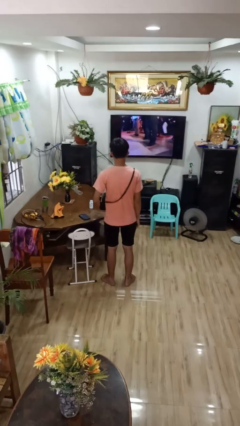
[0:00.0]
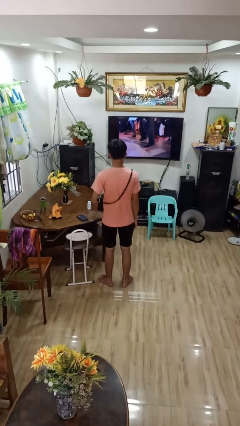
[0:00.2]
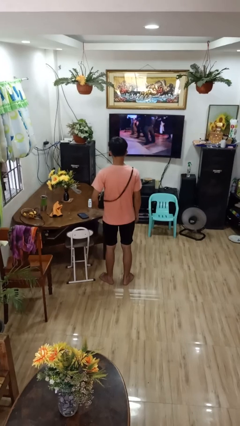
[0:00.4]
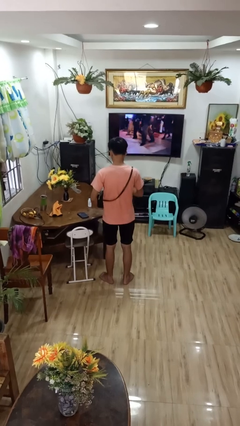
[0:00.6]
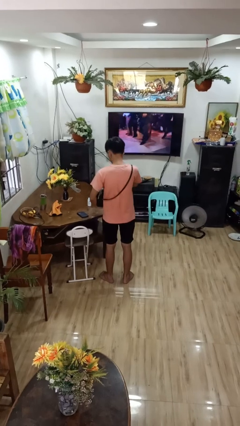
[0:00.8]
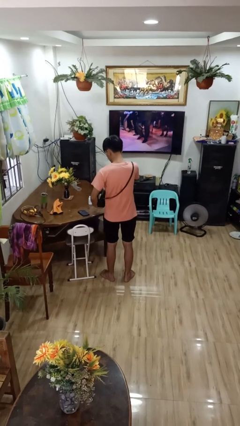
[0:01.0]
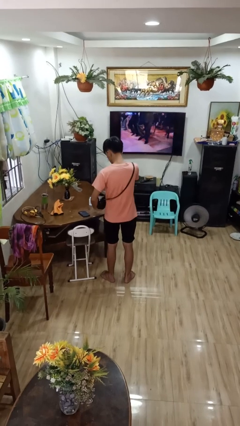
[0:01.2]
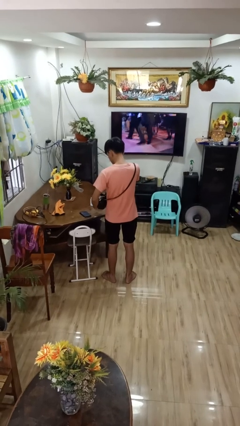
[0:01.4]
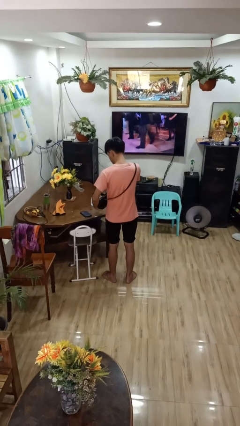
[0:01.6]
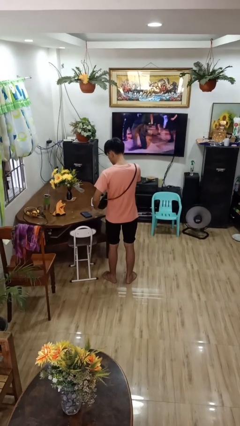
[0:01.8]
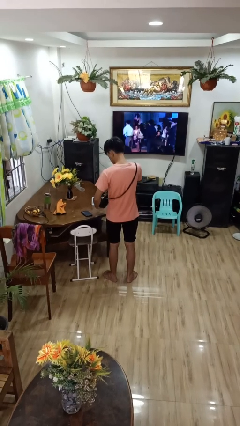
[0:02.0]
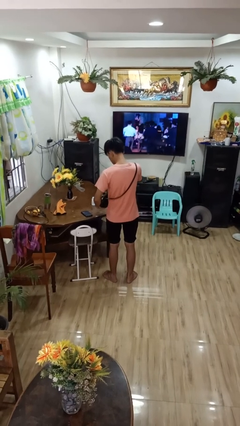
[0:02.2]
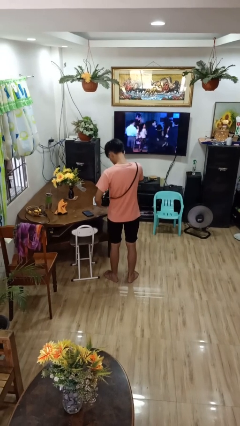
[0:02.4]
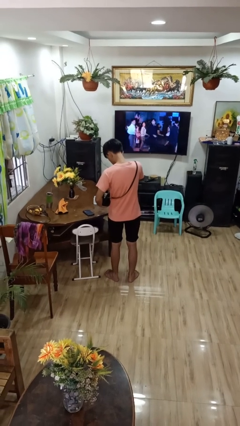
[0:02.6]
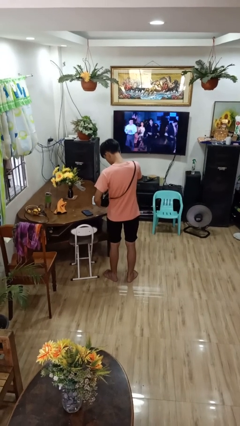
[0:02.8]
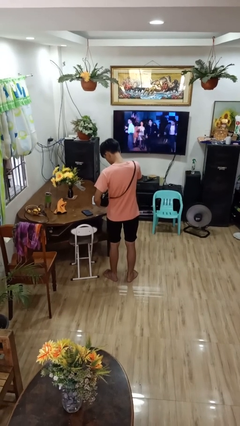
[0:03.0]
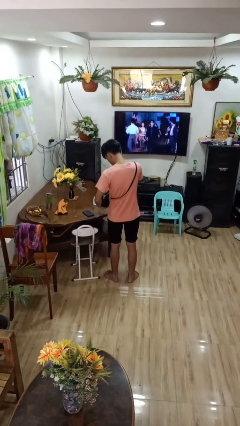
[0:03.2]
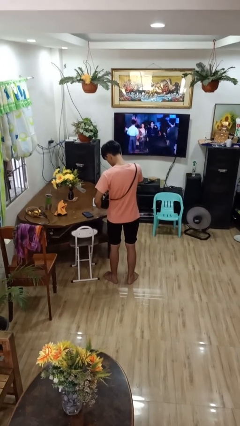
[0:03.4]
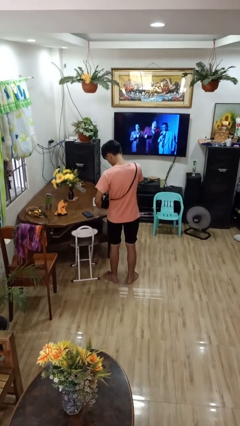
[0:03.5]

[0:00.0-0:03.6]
person searches in purse

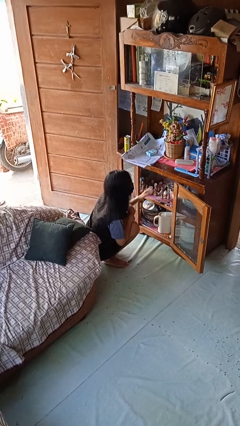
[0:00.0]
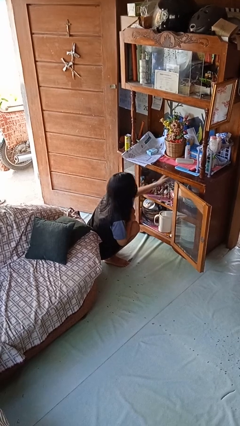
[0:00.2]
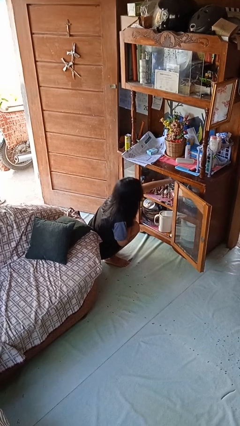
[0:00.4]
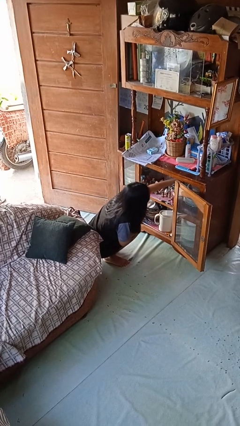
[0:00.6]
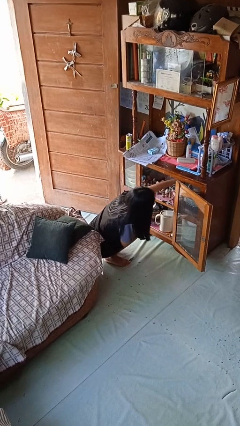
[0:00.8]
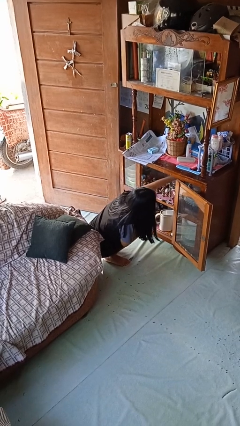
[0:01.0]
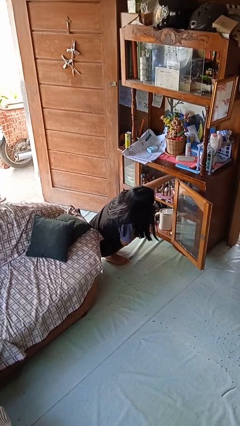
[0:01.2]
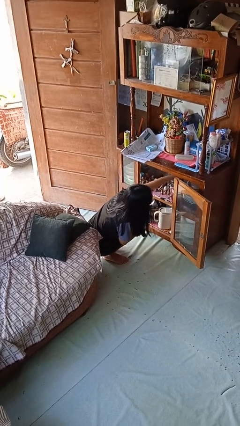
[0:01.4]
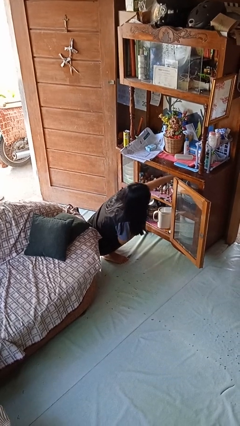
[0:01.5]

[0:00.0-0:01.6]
person searches in cabinet

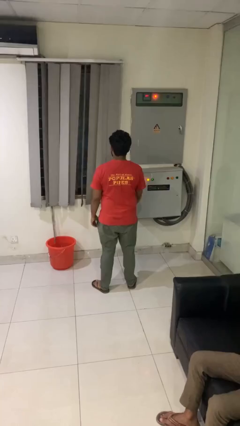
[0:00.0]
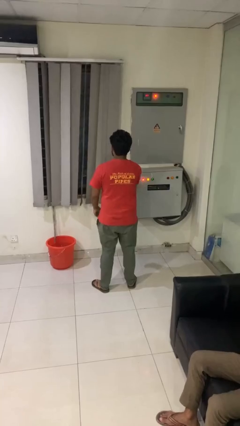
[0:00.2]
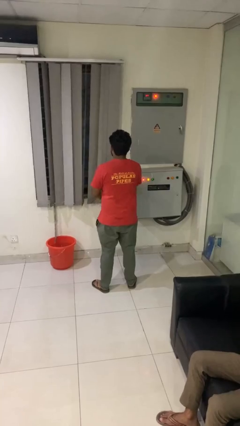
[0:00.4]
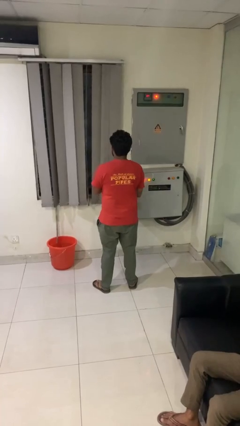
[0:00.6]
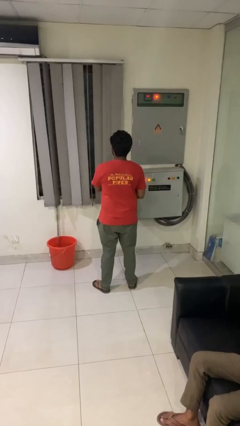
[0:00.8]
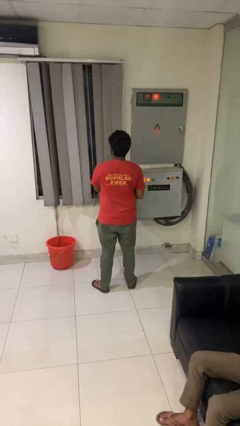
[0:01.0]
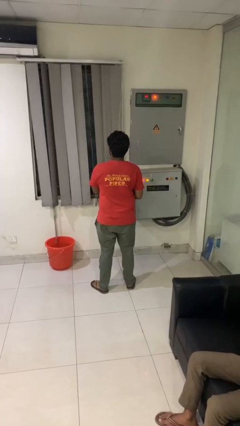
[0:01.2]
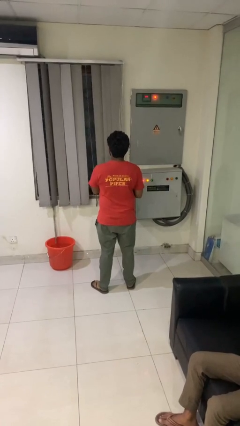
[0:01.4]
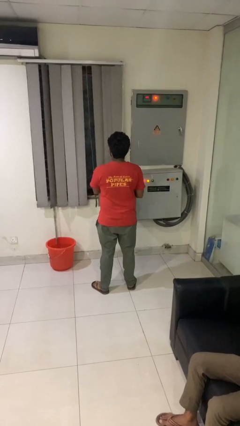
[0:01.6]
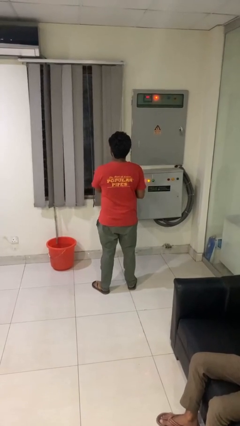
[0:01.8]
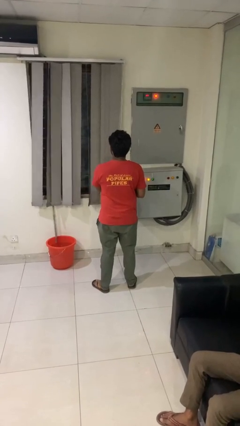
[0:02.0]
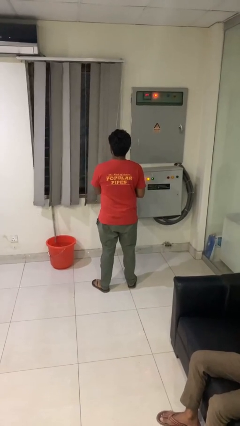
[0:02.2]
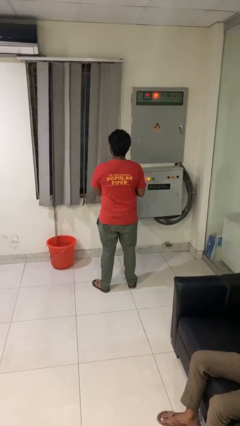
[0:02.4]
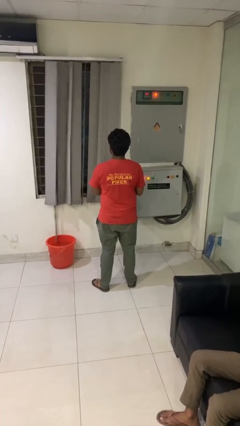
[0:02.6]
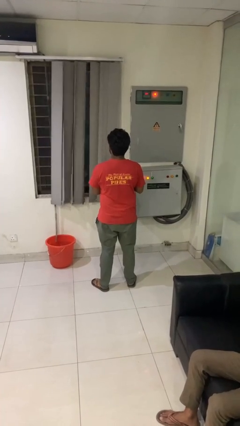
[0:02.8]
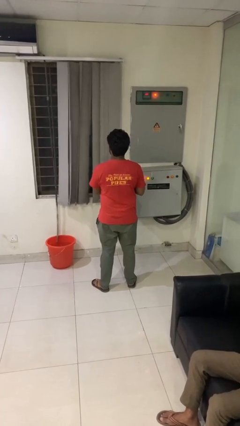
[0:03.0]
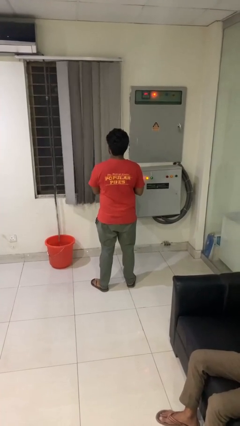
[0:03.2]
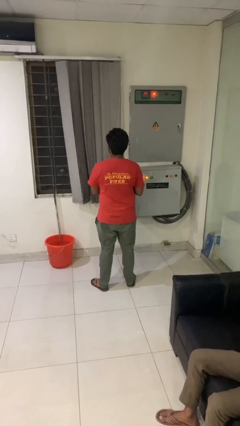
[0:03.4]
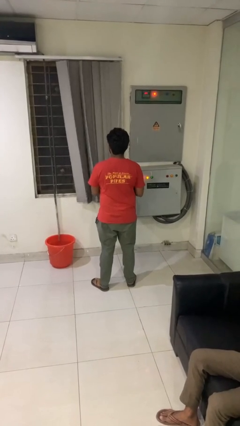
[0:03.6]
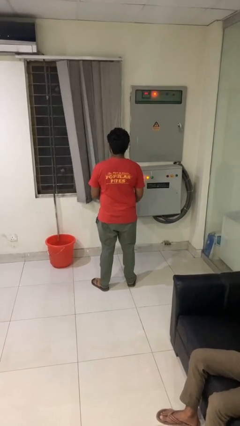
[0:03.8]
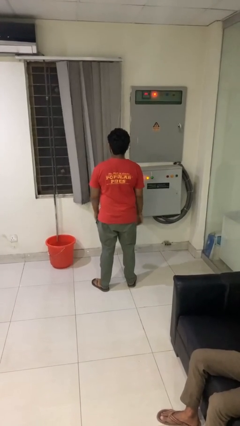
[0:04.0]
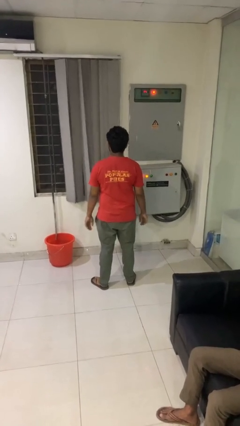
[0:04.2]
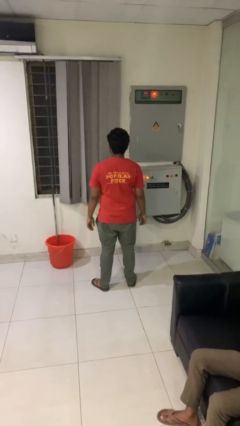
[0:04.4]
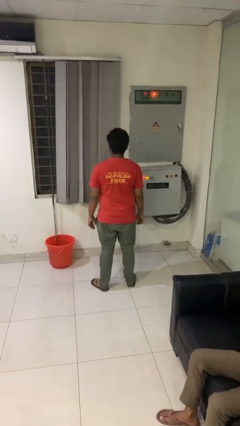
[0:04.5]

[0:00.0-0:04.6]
person opens curtains

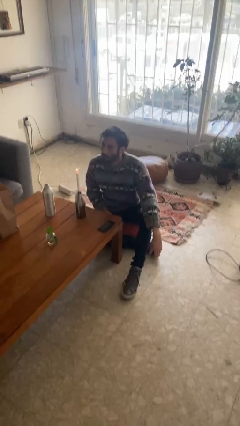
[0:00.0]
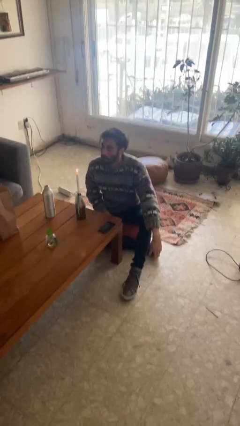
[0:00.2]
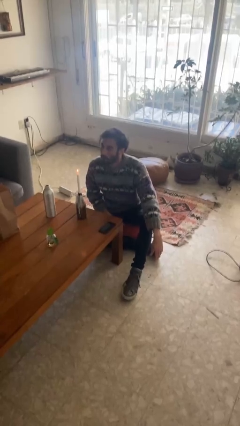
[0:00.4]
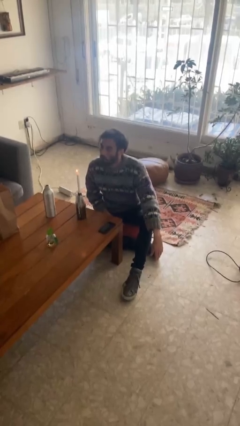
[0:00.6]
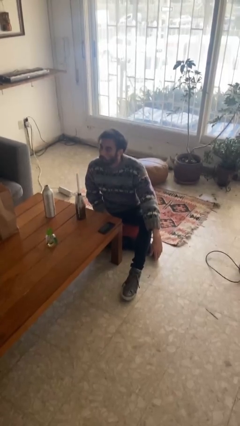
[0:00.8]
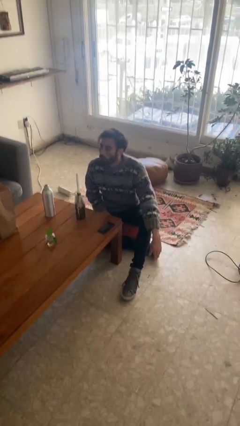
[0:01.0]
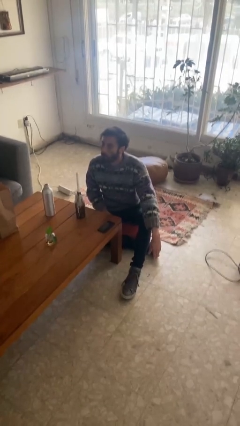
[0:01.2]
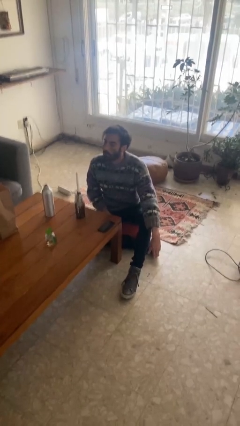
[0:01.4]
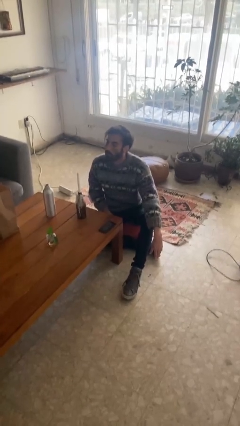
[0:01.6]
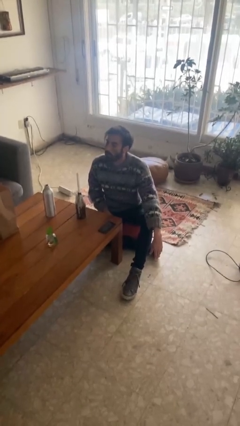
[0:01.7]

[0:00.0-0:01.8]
person extinguishes candle

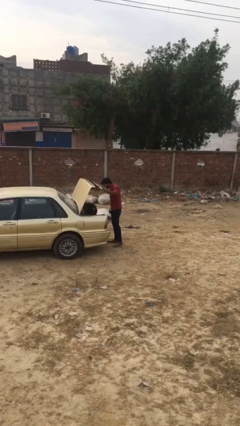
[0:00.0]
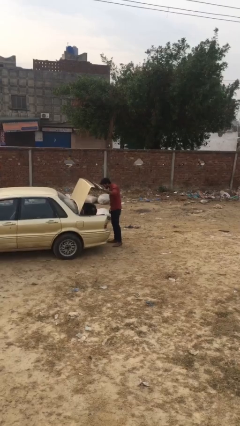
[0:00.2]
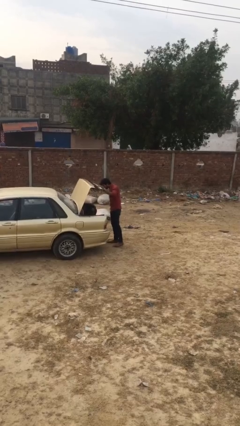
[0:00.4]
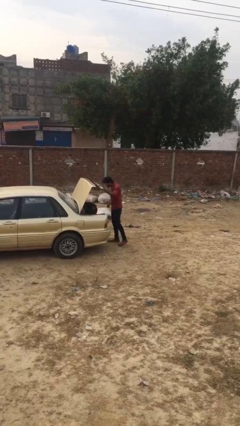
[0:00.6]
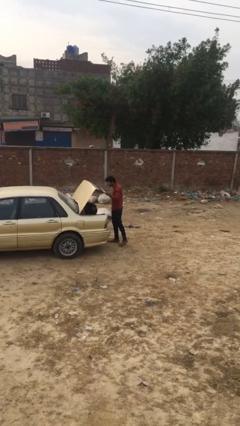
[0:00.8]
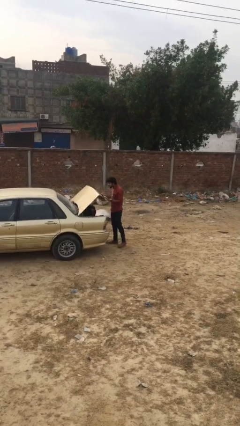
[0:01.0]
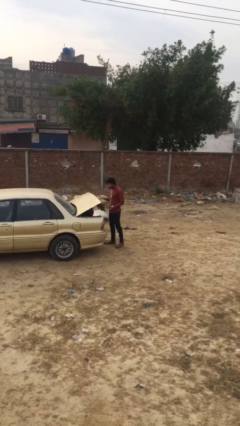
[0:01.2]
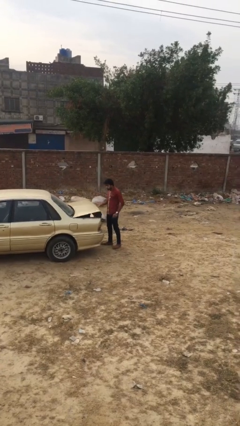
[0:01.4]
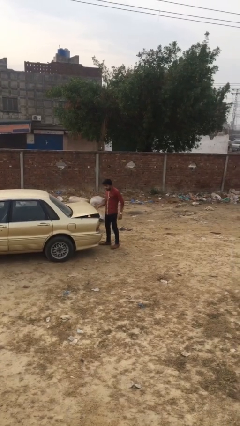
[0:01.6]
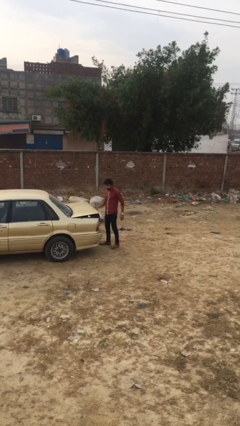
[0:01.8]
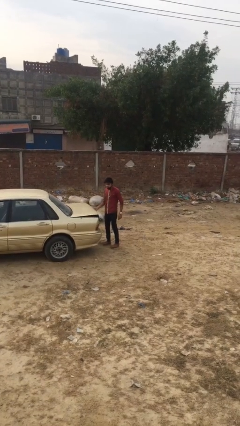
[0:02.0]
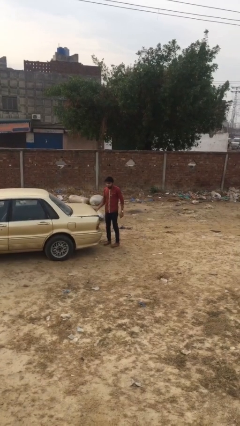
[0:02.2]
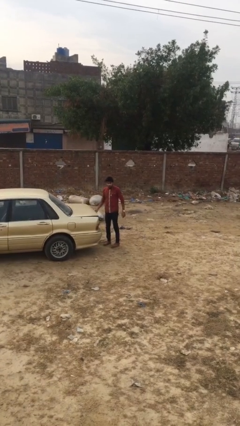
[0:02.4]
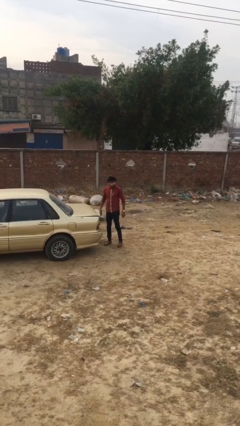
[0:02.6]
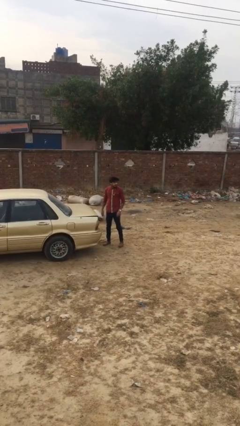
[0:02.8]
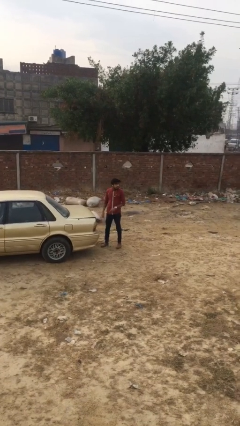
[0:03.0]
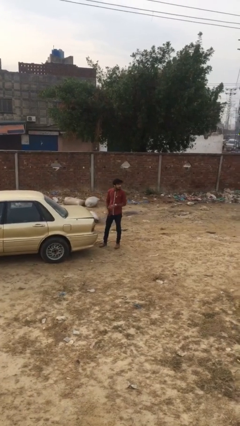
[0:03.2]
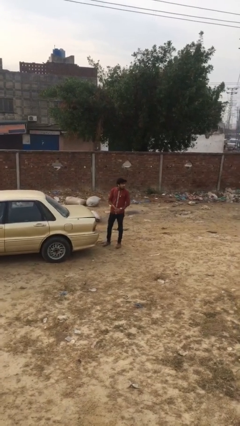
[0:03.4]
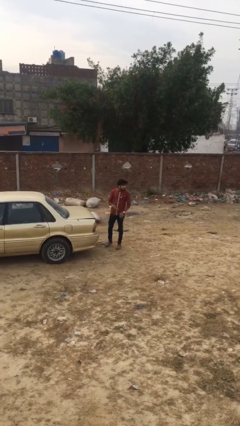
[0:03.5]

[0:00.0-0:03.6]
person closes car trunk

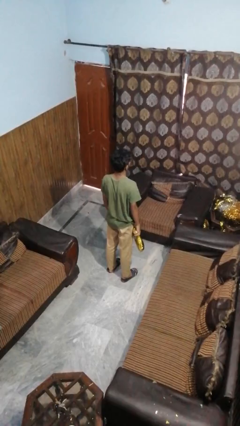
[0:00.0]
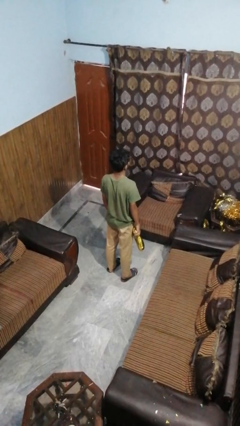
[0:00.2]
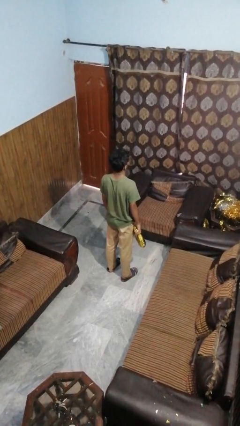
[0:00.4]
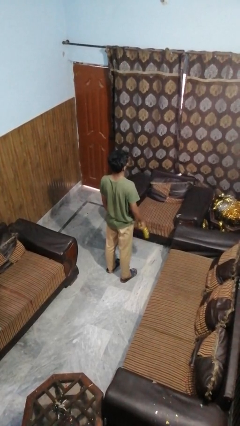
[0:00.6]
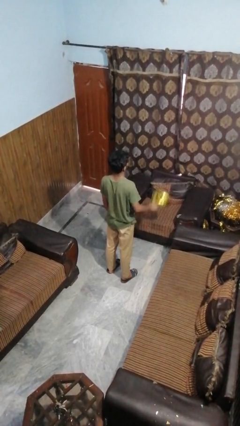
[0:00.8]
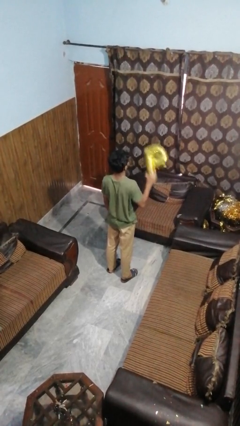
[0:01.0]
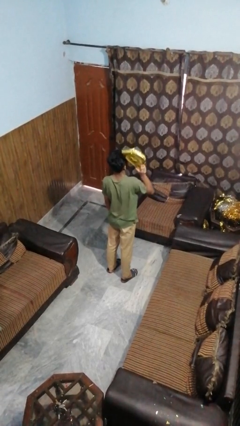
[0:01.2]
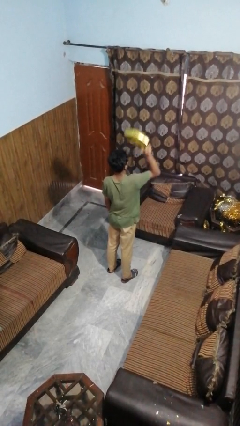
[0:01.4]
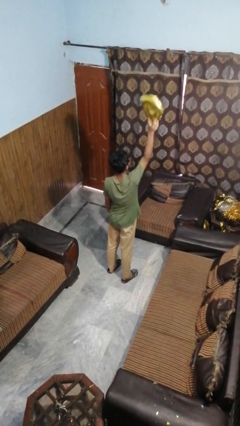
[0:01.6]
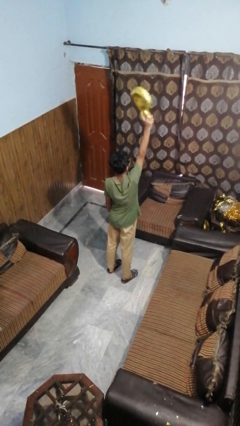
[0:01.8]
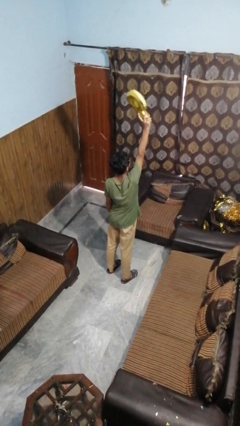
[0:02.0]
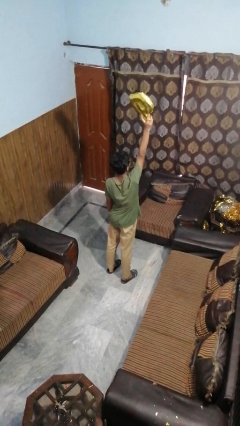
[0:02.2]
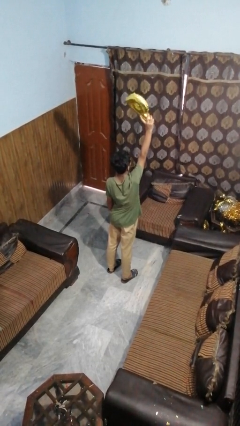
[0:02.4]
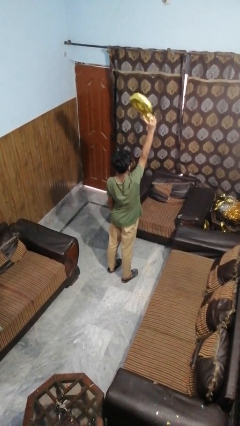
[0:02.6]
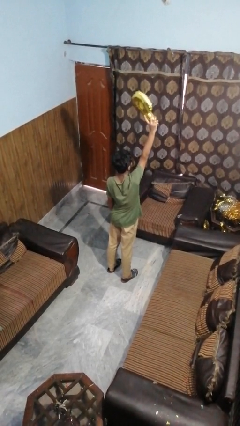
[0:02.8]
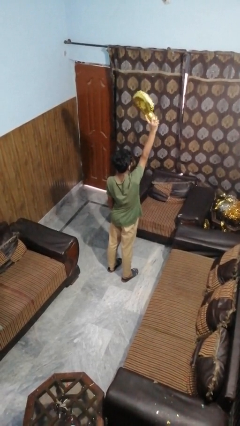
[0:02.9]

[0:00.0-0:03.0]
person holds object above head
